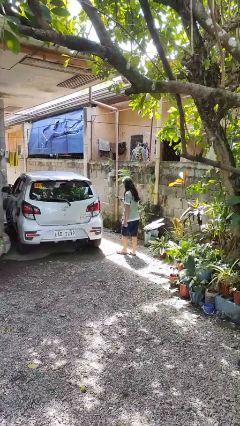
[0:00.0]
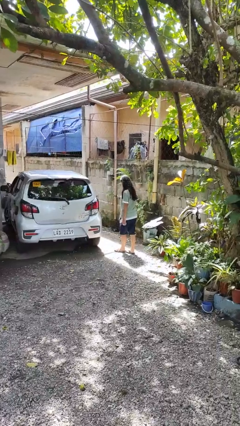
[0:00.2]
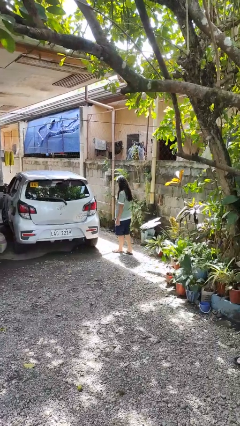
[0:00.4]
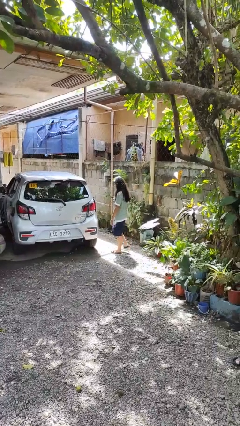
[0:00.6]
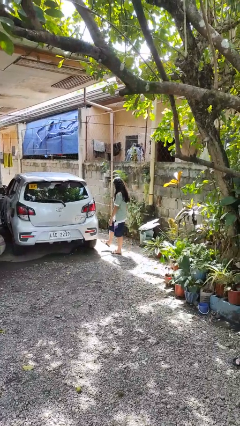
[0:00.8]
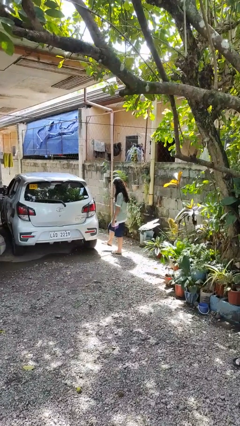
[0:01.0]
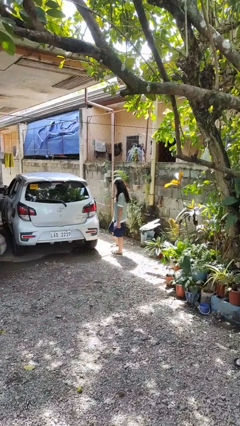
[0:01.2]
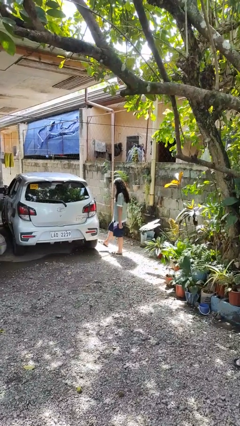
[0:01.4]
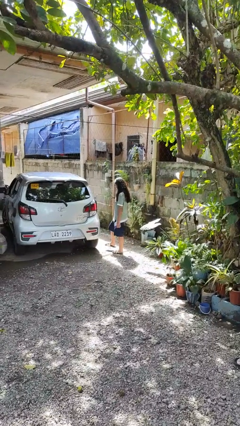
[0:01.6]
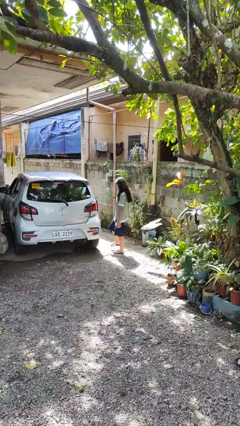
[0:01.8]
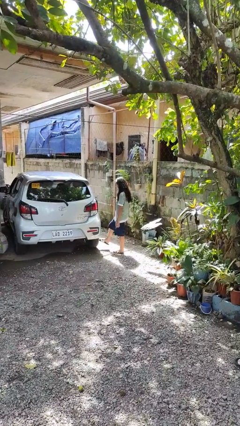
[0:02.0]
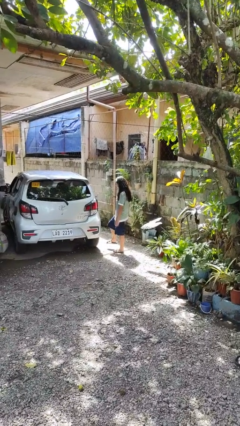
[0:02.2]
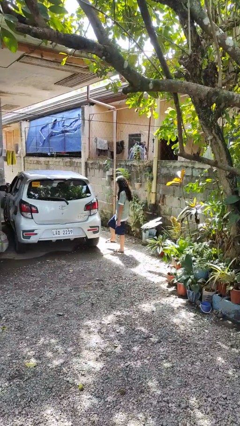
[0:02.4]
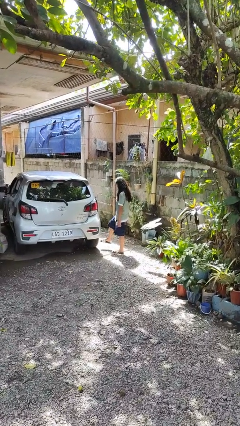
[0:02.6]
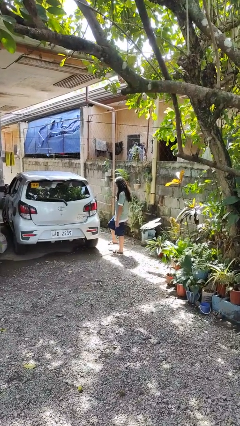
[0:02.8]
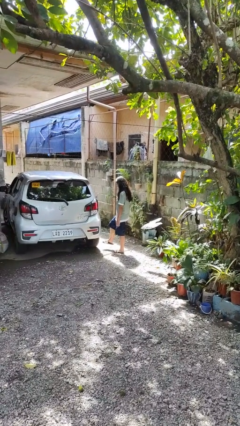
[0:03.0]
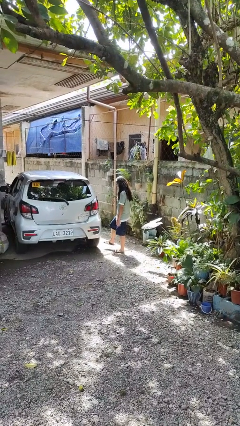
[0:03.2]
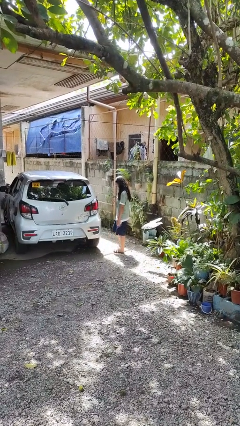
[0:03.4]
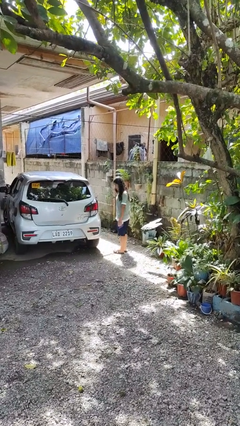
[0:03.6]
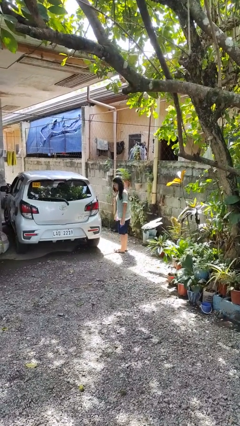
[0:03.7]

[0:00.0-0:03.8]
person kicks car tires

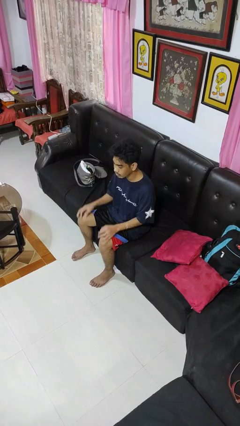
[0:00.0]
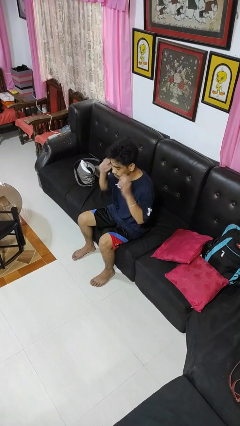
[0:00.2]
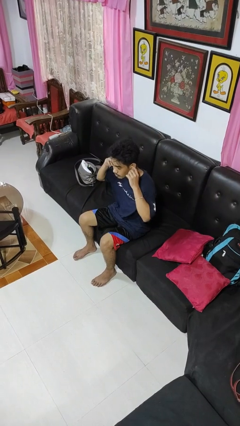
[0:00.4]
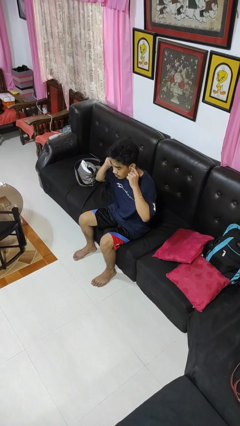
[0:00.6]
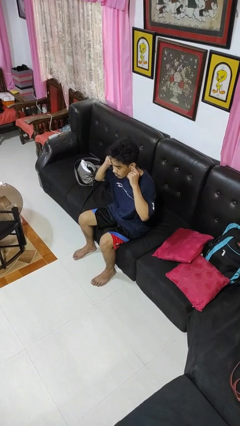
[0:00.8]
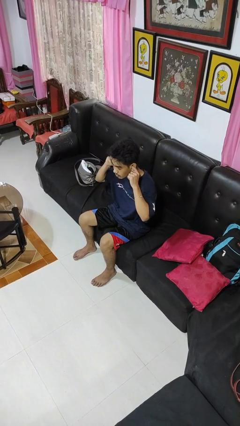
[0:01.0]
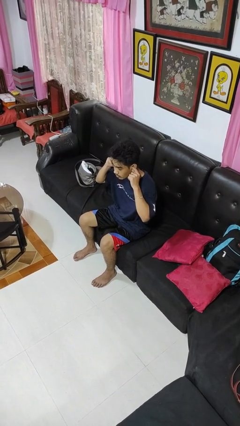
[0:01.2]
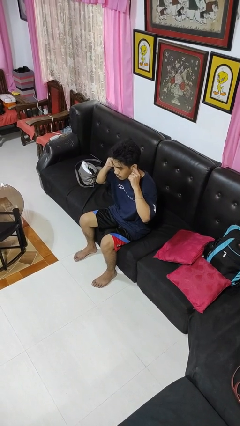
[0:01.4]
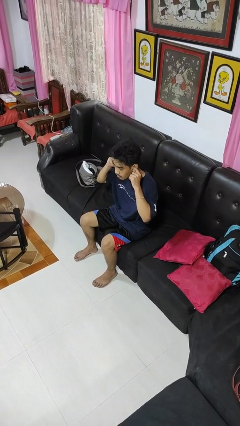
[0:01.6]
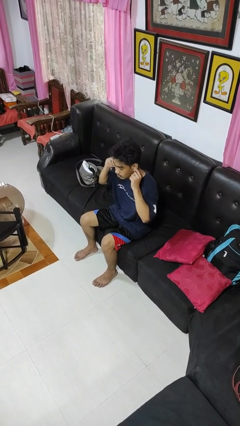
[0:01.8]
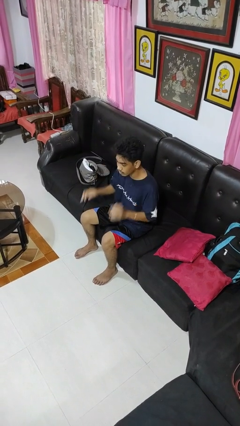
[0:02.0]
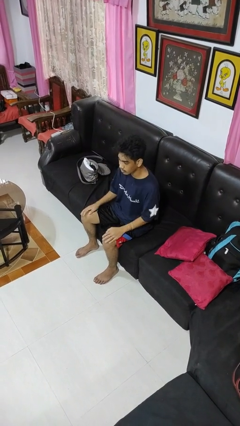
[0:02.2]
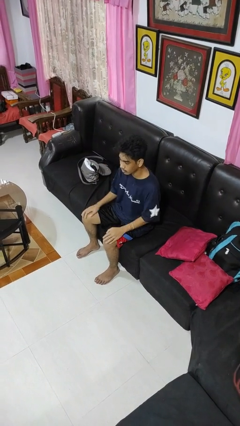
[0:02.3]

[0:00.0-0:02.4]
person puts fingers in ear

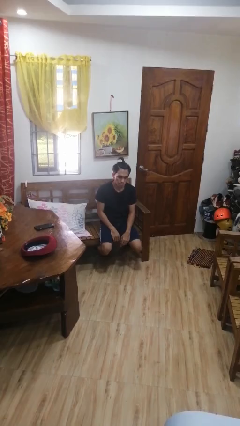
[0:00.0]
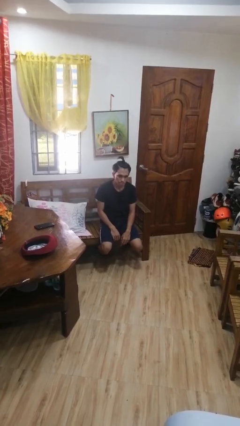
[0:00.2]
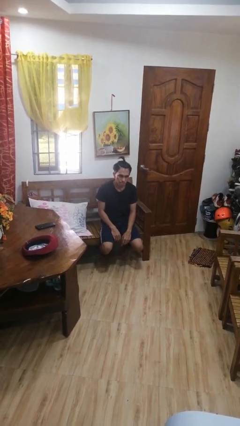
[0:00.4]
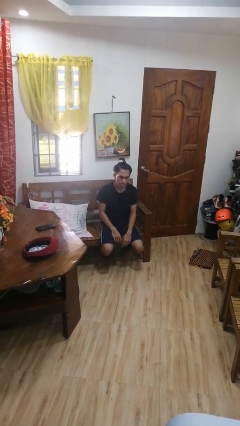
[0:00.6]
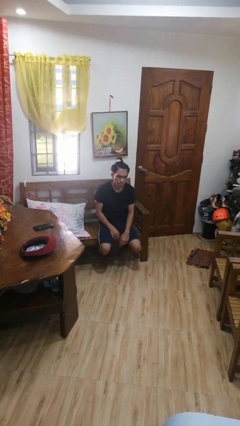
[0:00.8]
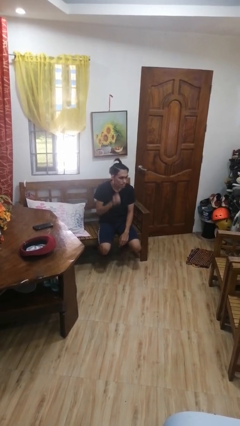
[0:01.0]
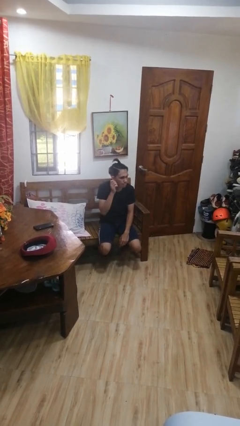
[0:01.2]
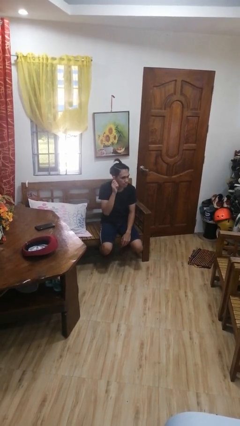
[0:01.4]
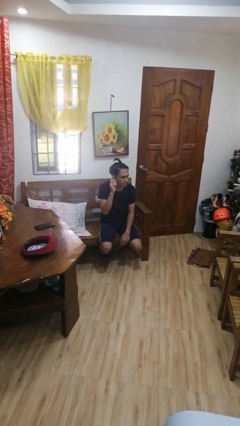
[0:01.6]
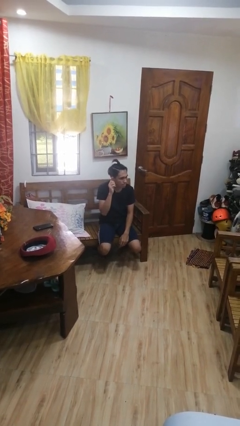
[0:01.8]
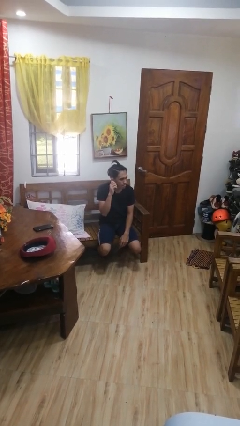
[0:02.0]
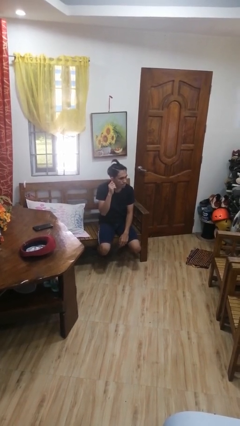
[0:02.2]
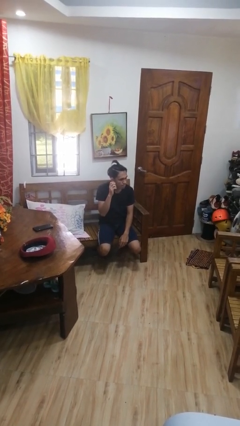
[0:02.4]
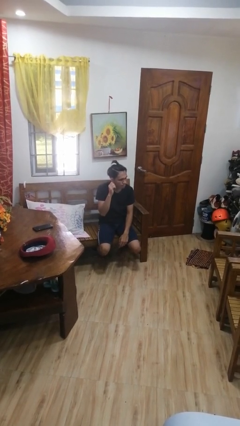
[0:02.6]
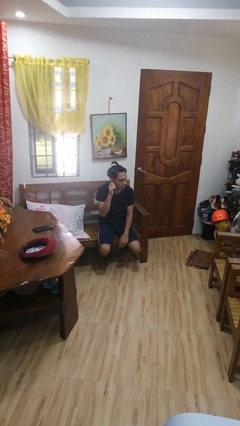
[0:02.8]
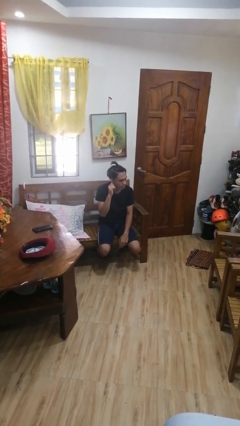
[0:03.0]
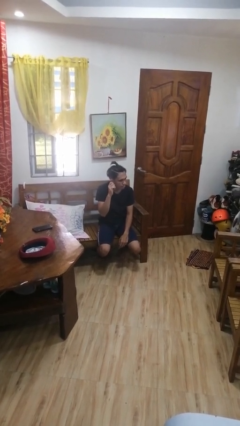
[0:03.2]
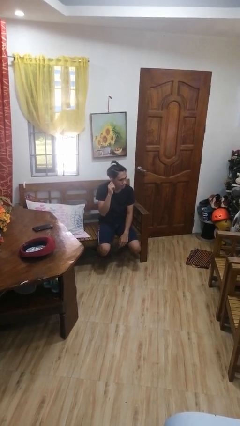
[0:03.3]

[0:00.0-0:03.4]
person touches earlobe

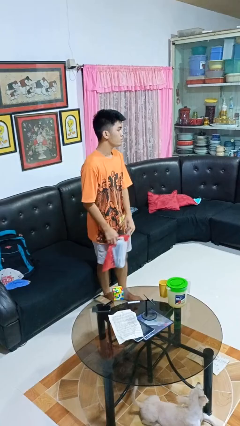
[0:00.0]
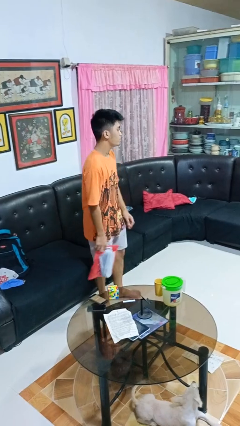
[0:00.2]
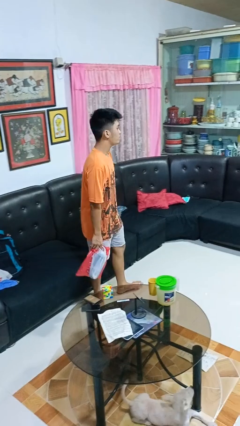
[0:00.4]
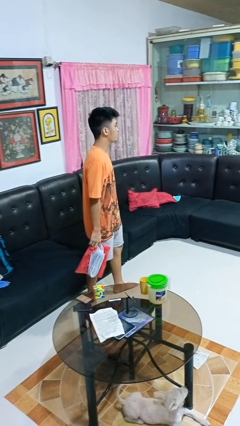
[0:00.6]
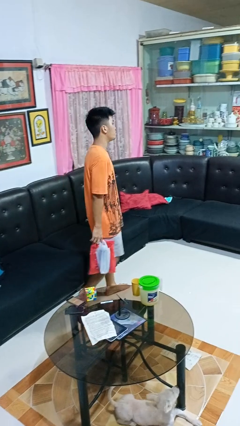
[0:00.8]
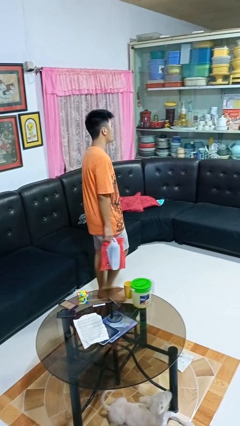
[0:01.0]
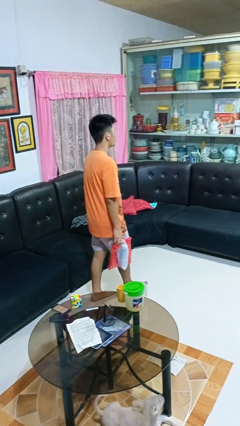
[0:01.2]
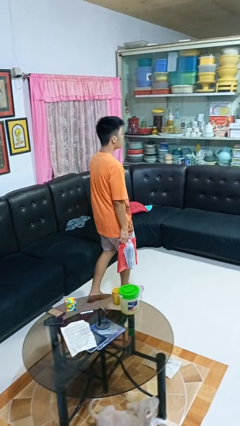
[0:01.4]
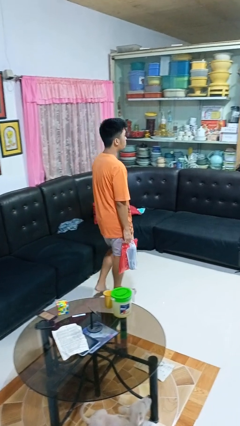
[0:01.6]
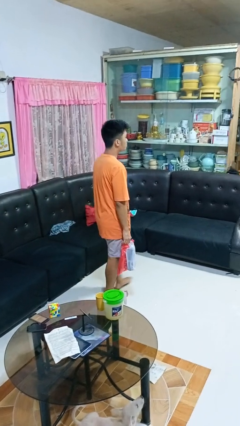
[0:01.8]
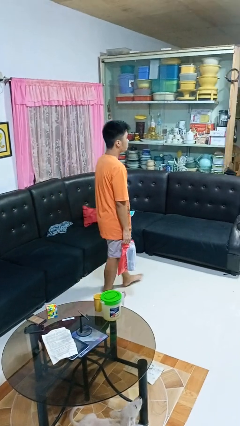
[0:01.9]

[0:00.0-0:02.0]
person carries groceries

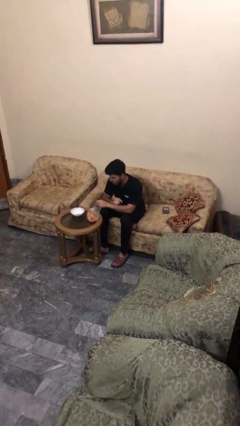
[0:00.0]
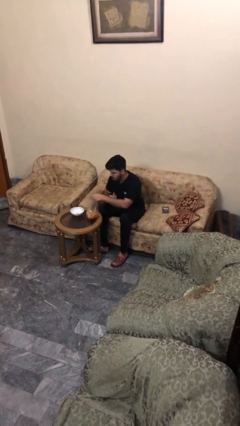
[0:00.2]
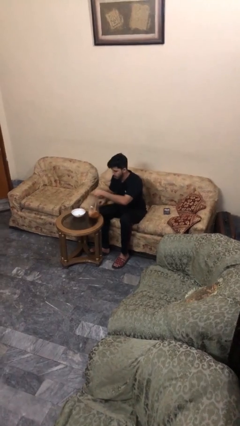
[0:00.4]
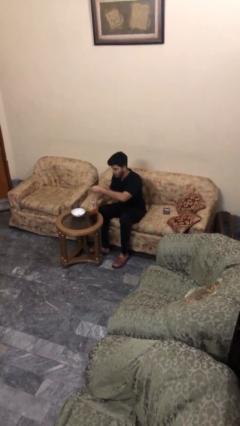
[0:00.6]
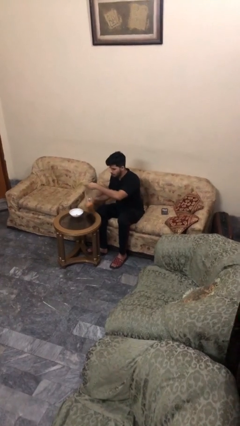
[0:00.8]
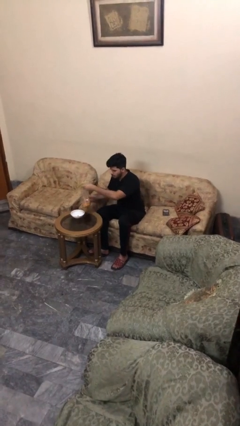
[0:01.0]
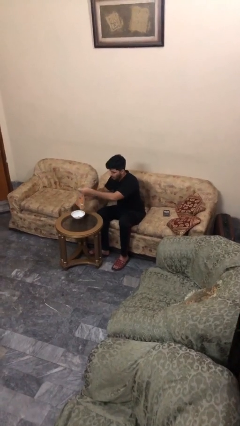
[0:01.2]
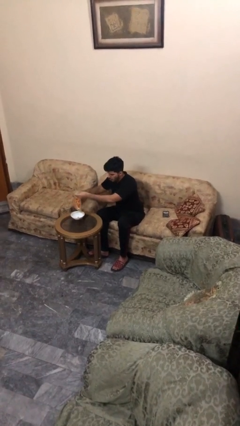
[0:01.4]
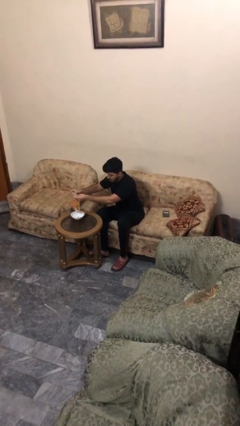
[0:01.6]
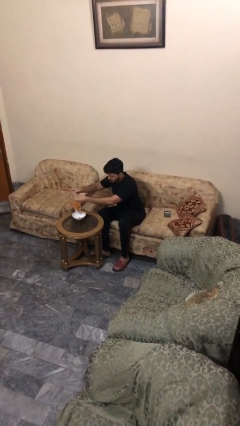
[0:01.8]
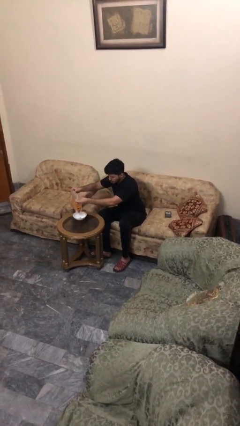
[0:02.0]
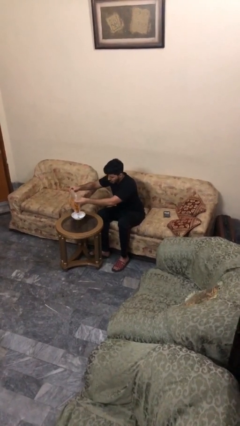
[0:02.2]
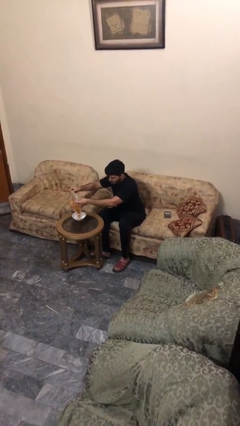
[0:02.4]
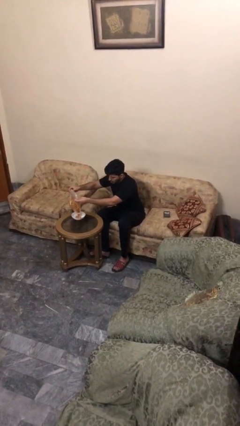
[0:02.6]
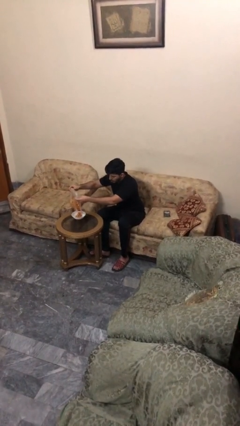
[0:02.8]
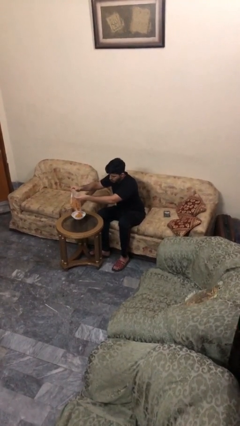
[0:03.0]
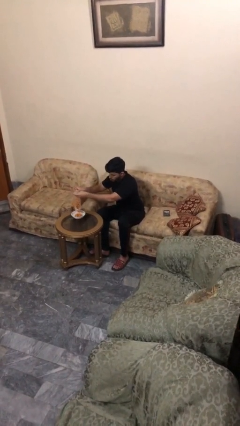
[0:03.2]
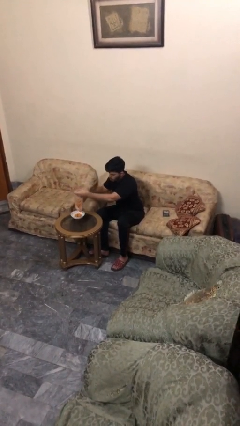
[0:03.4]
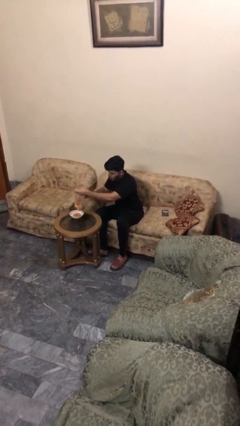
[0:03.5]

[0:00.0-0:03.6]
person pours into bowl

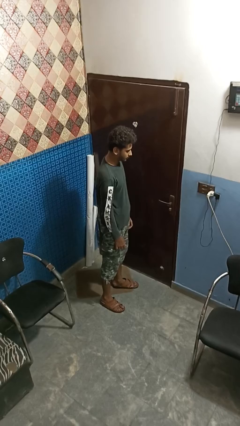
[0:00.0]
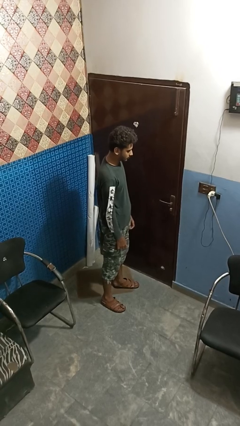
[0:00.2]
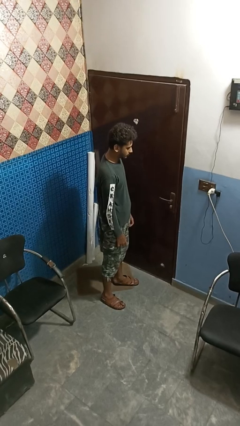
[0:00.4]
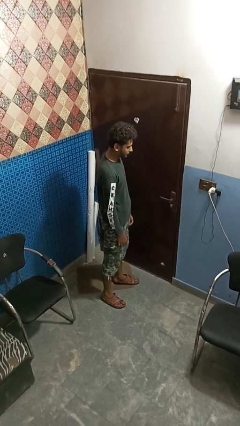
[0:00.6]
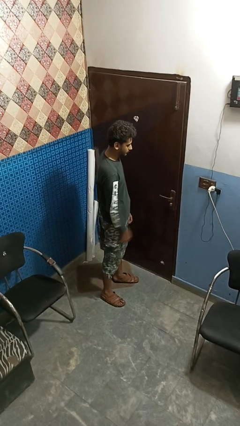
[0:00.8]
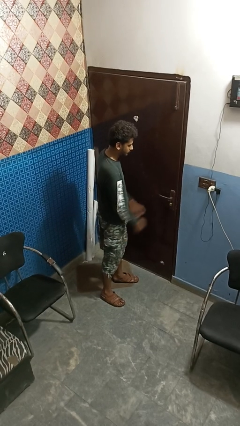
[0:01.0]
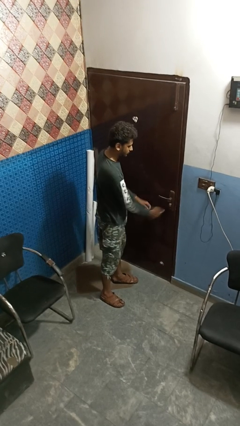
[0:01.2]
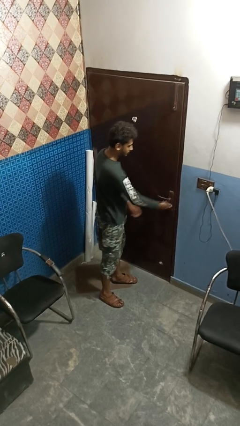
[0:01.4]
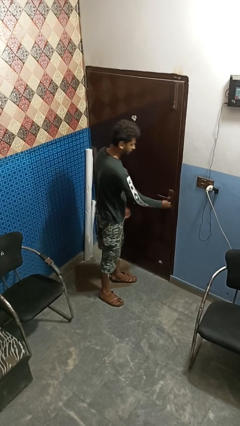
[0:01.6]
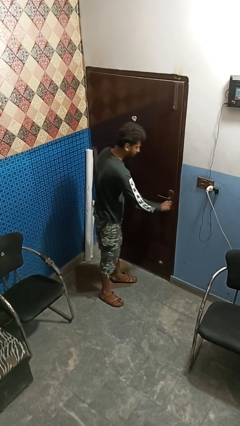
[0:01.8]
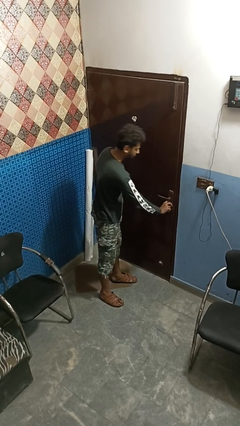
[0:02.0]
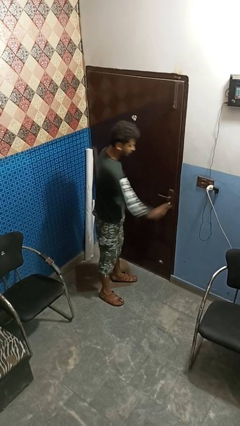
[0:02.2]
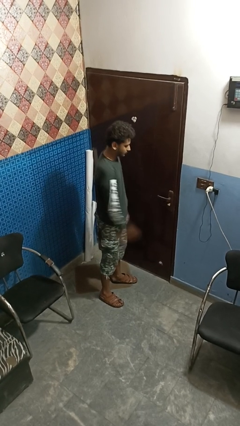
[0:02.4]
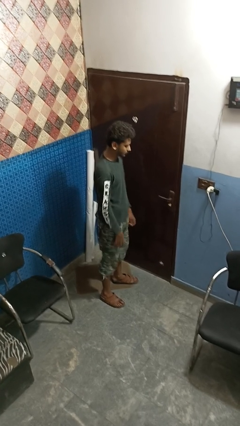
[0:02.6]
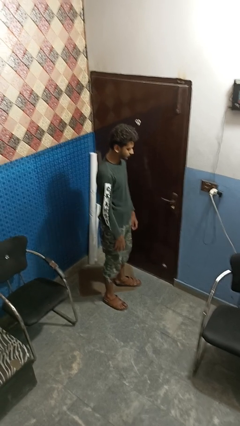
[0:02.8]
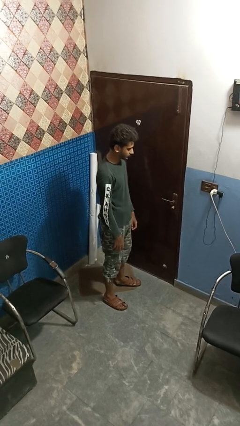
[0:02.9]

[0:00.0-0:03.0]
person unlocks door with keys
